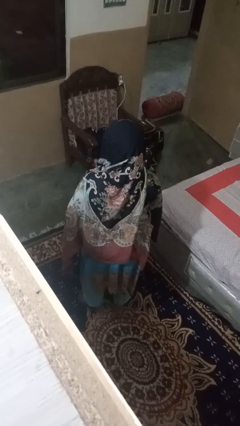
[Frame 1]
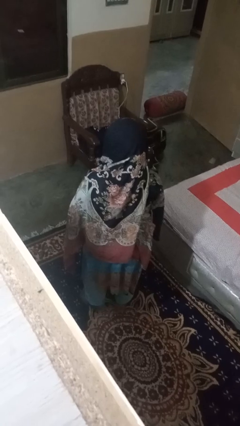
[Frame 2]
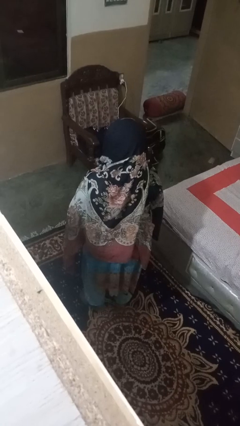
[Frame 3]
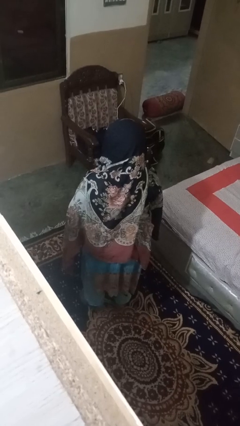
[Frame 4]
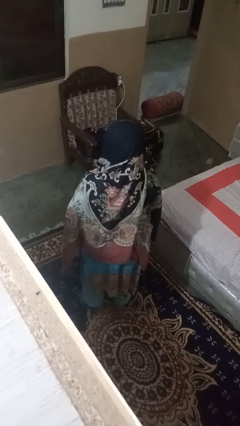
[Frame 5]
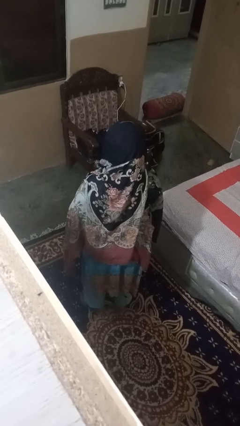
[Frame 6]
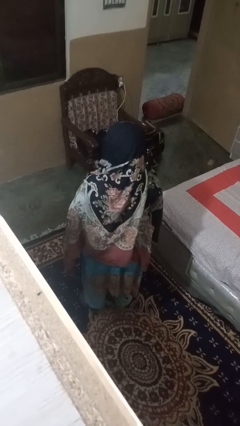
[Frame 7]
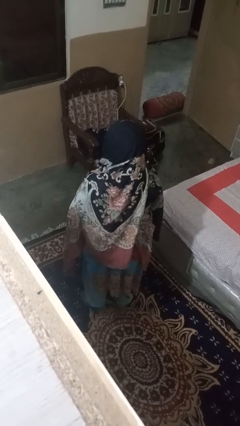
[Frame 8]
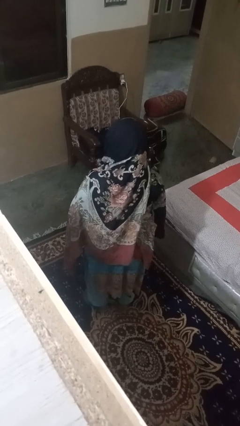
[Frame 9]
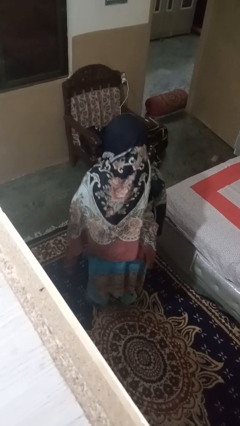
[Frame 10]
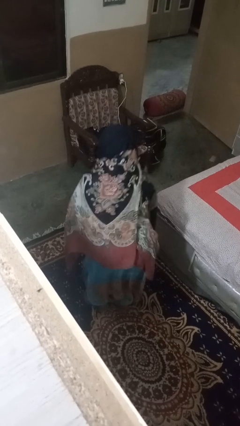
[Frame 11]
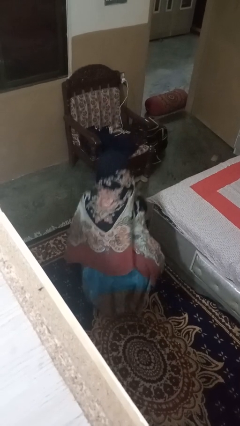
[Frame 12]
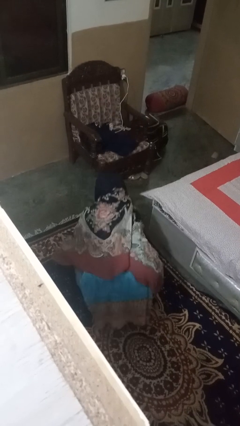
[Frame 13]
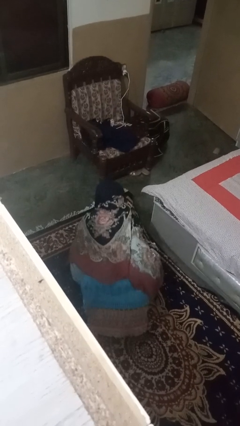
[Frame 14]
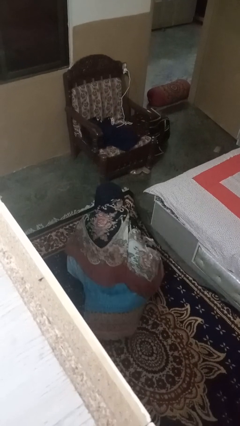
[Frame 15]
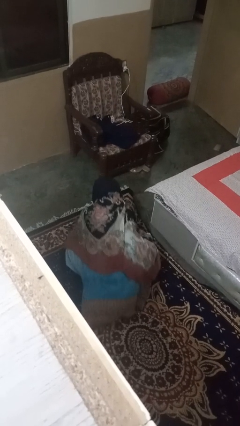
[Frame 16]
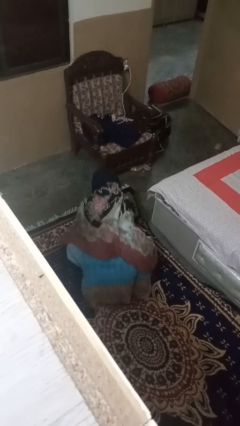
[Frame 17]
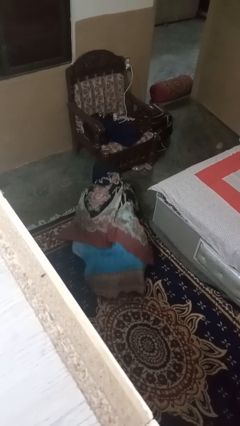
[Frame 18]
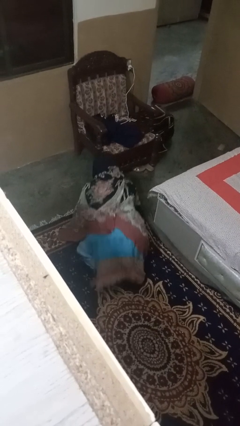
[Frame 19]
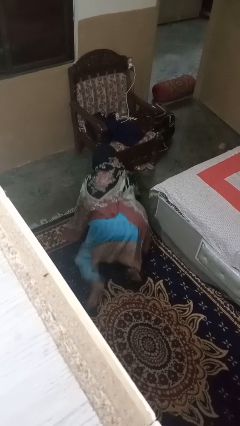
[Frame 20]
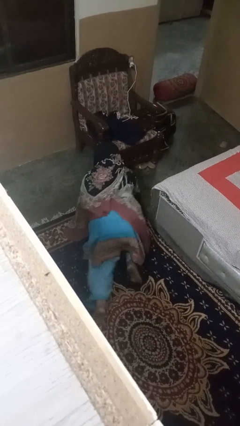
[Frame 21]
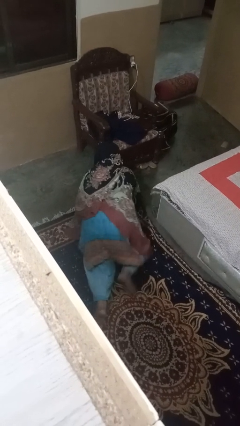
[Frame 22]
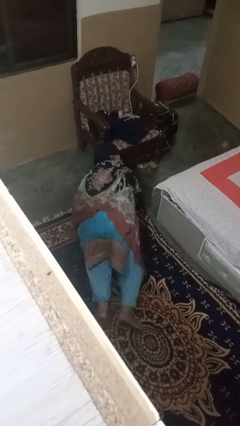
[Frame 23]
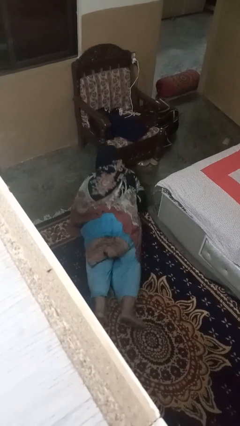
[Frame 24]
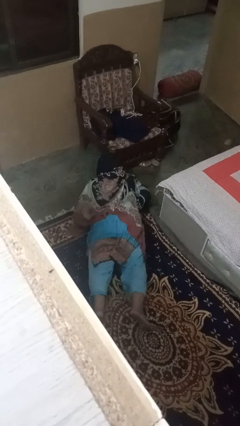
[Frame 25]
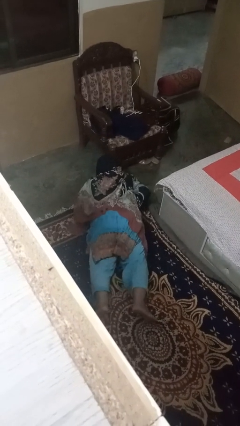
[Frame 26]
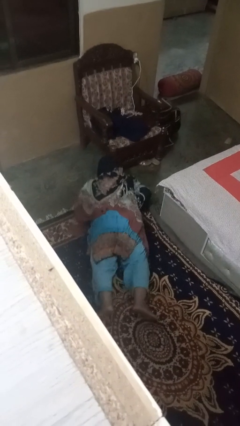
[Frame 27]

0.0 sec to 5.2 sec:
person exercises with pushup

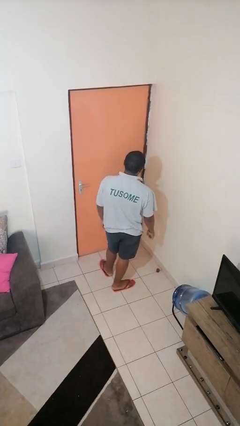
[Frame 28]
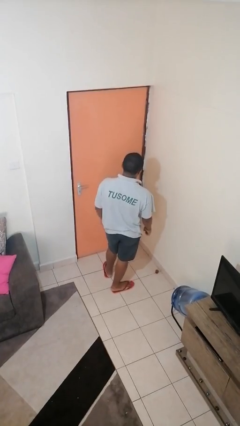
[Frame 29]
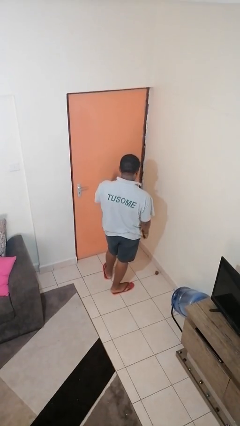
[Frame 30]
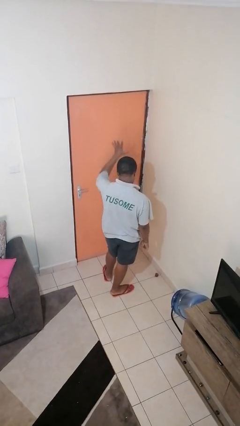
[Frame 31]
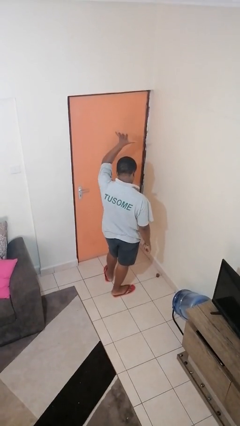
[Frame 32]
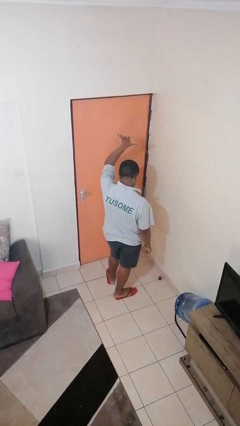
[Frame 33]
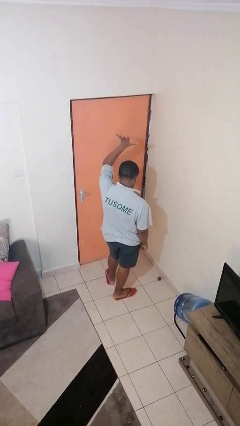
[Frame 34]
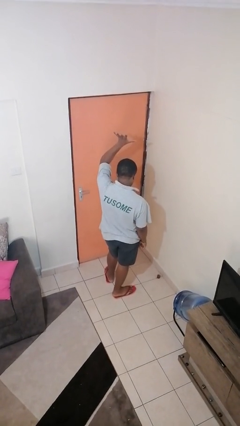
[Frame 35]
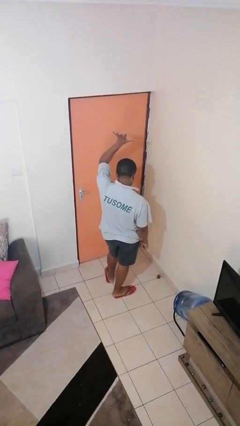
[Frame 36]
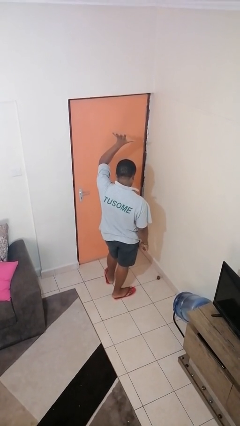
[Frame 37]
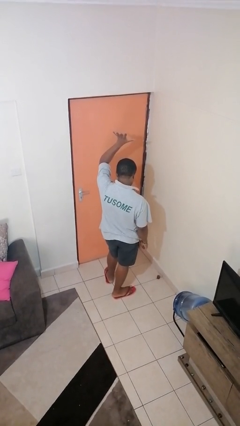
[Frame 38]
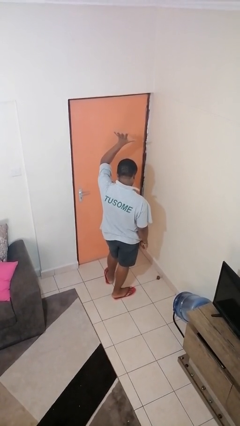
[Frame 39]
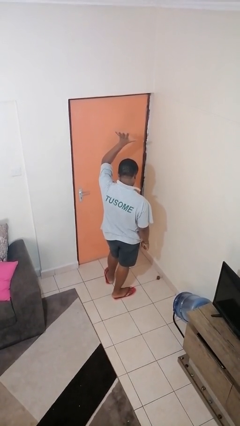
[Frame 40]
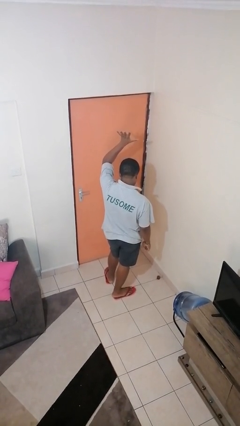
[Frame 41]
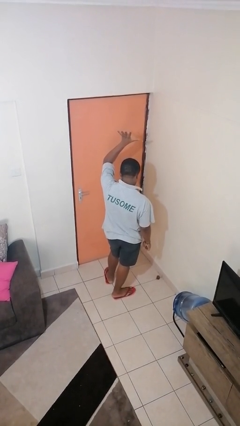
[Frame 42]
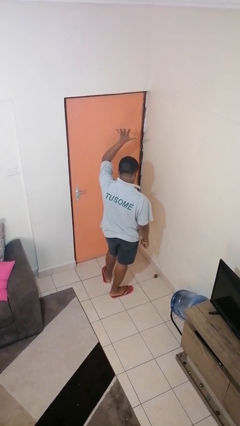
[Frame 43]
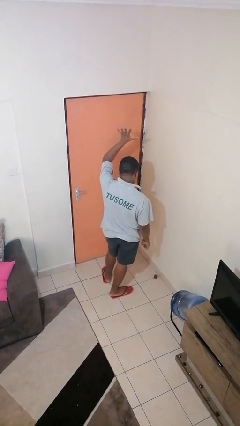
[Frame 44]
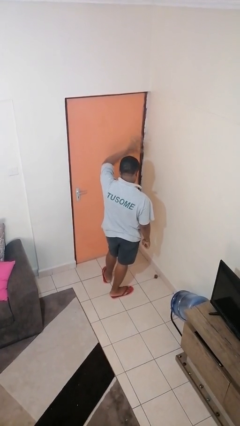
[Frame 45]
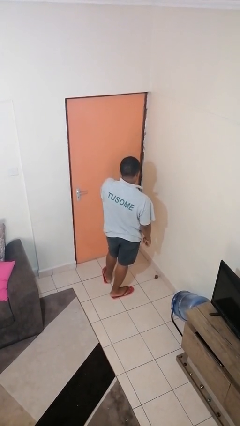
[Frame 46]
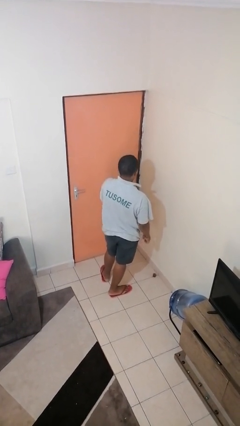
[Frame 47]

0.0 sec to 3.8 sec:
person gestures number five

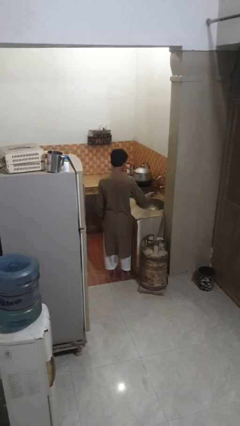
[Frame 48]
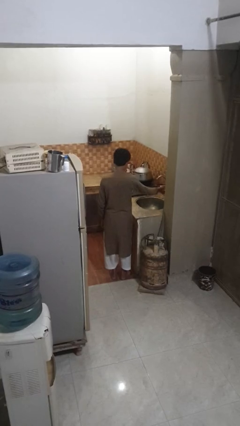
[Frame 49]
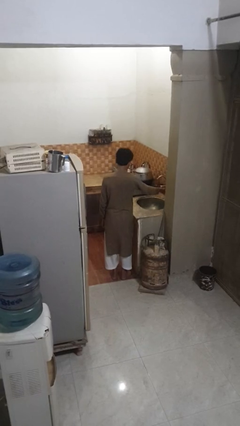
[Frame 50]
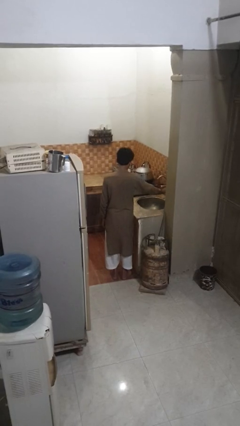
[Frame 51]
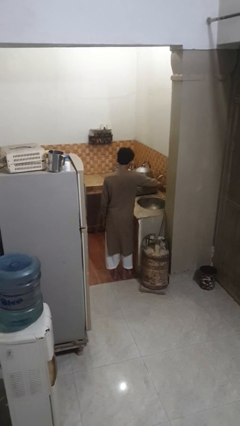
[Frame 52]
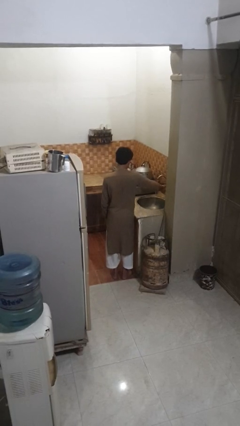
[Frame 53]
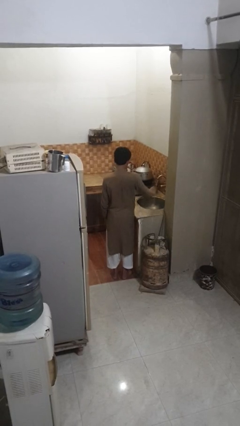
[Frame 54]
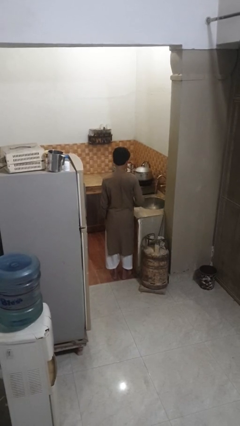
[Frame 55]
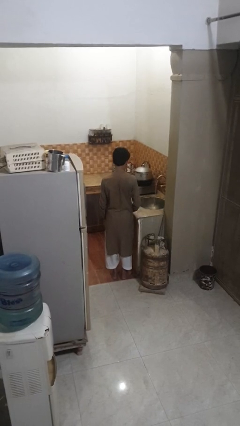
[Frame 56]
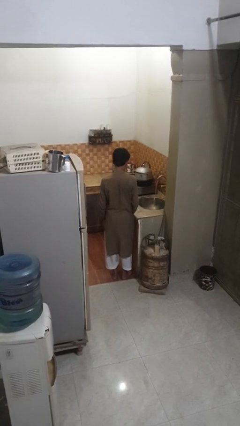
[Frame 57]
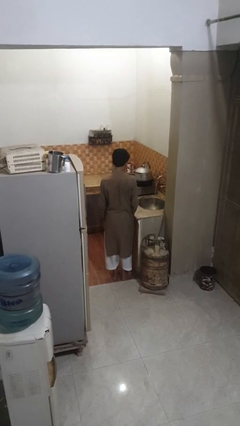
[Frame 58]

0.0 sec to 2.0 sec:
person turns on faucet

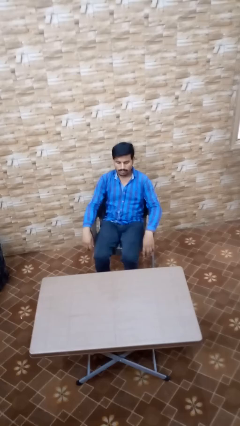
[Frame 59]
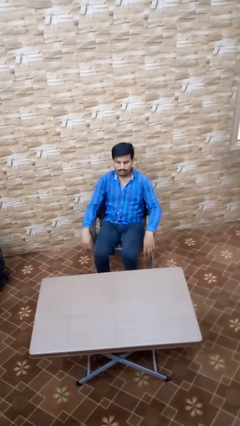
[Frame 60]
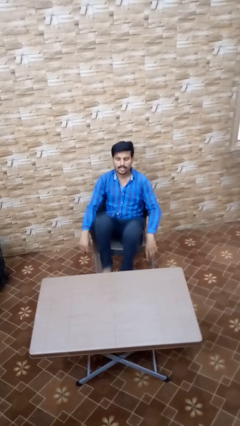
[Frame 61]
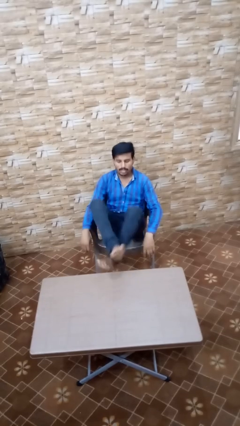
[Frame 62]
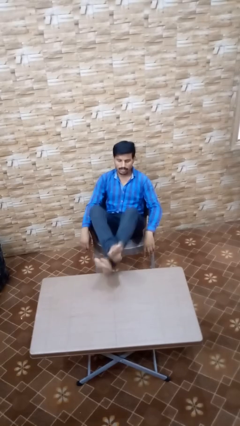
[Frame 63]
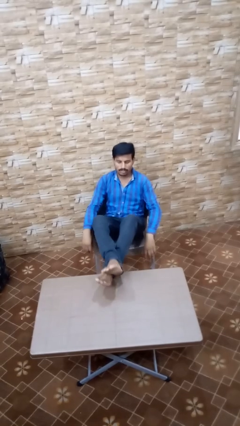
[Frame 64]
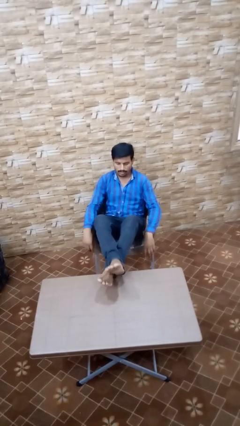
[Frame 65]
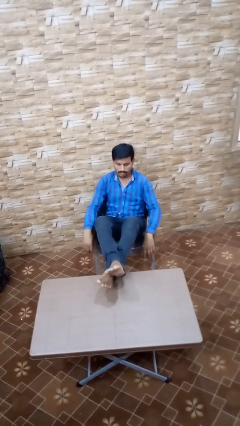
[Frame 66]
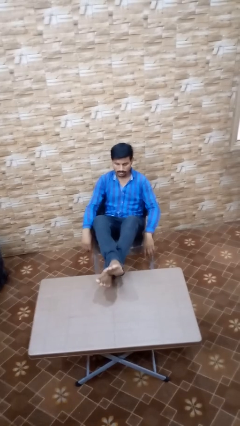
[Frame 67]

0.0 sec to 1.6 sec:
person puts feet up

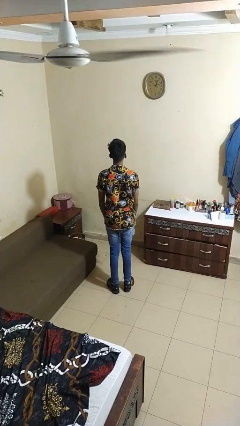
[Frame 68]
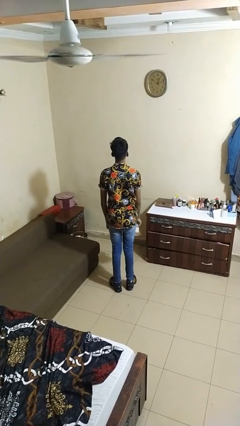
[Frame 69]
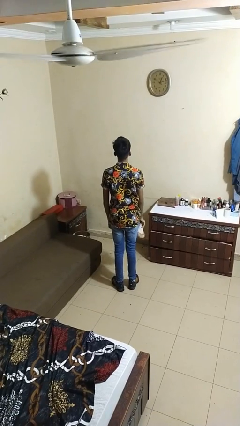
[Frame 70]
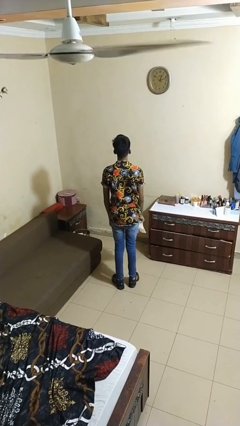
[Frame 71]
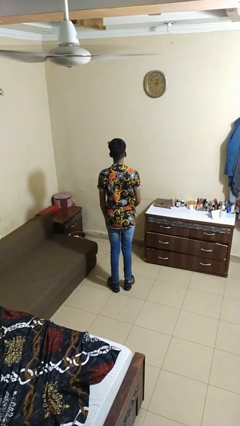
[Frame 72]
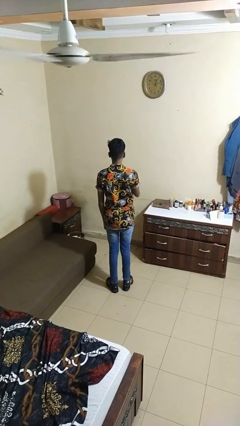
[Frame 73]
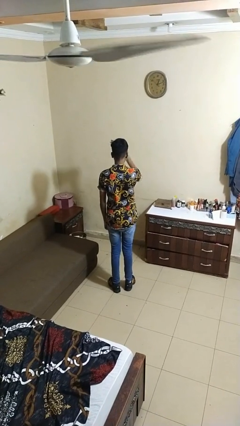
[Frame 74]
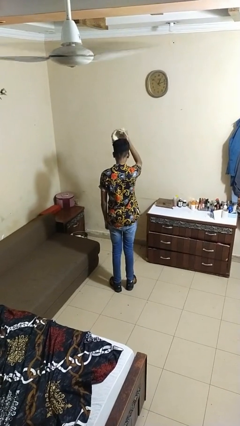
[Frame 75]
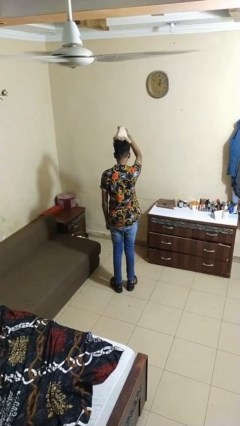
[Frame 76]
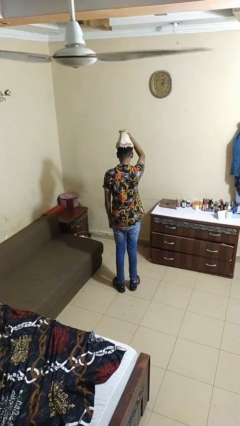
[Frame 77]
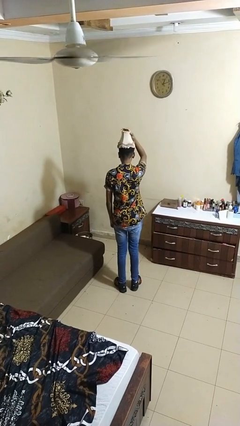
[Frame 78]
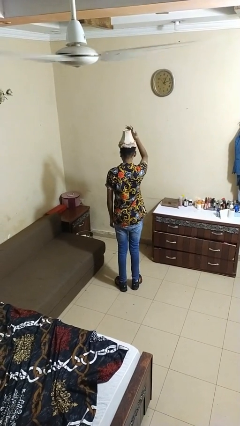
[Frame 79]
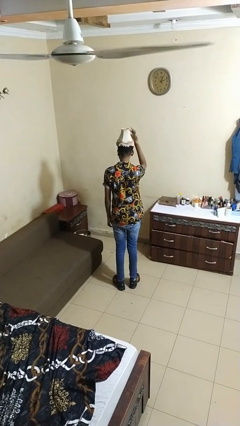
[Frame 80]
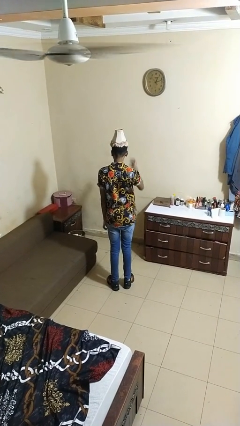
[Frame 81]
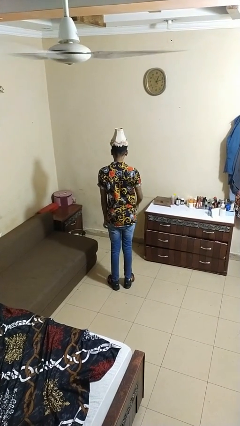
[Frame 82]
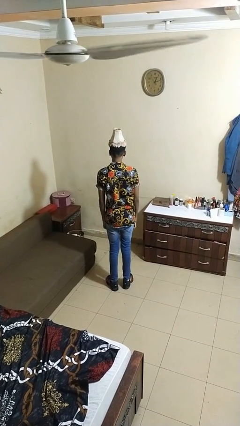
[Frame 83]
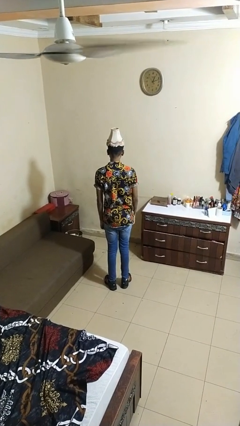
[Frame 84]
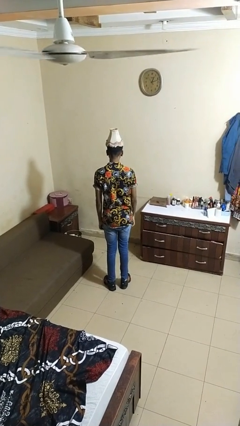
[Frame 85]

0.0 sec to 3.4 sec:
person puts on hat

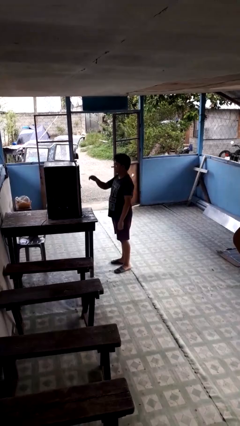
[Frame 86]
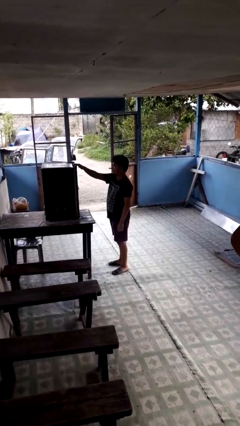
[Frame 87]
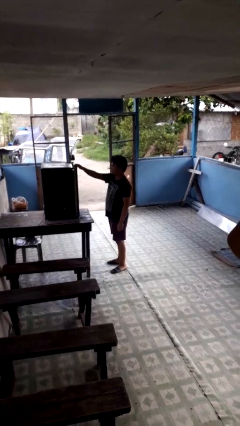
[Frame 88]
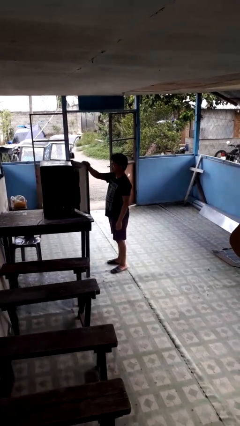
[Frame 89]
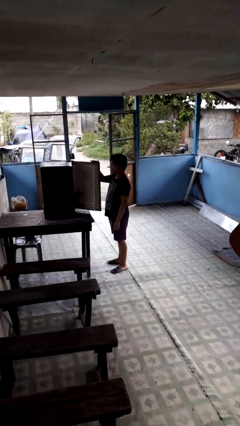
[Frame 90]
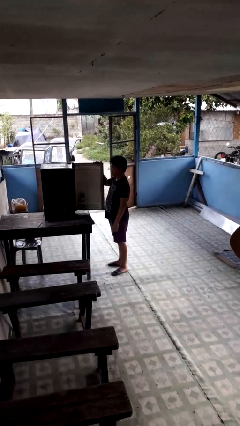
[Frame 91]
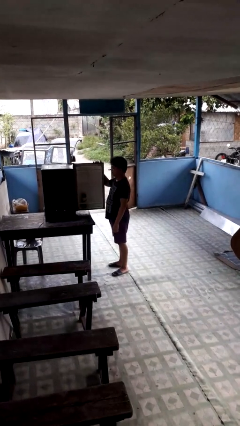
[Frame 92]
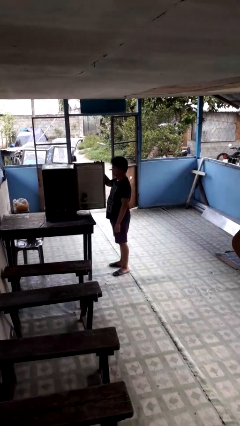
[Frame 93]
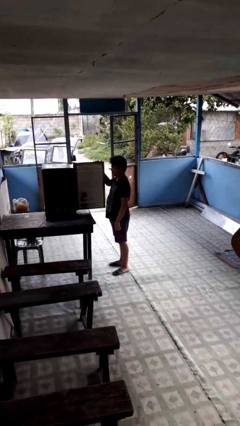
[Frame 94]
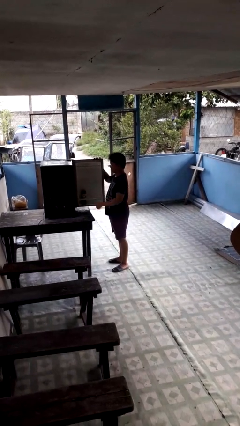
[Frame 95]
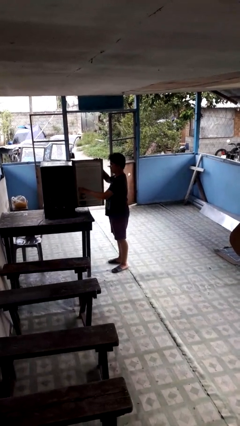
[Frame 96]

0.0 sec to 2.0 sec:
person opens refrigerator
